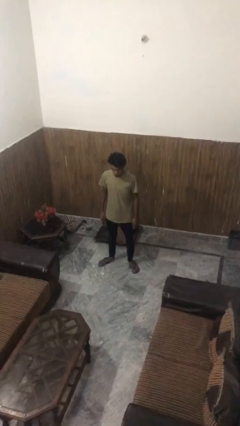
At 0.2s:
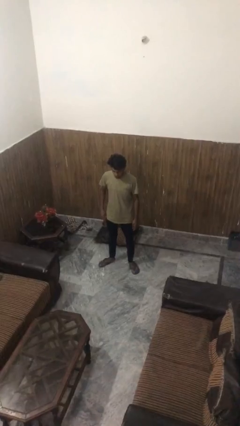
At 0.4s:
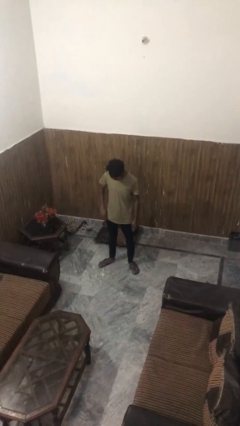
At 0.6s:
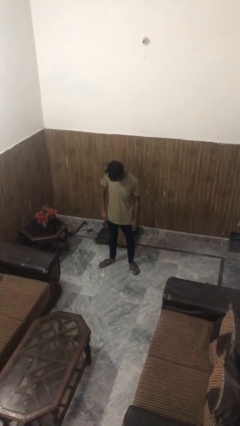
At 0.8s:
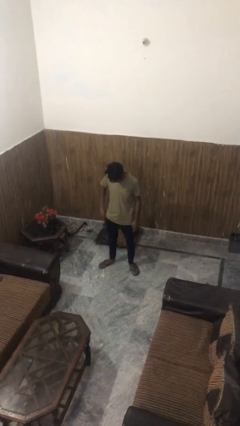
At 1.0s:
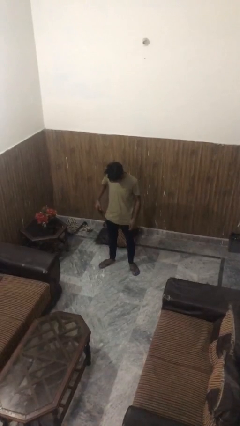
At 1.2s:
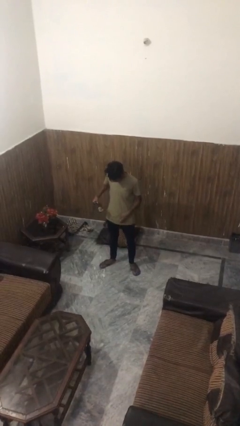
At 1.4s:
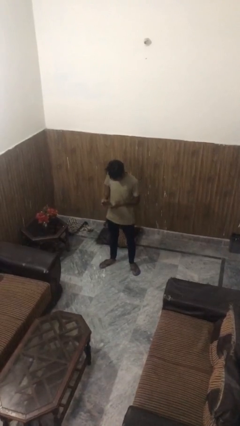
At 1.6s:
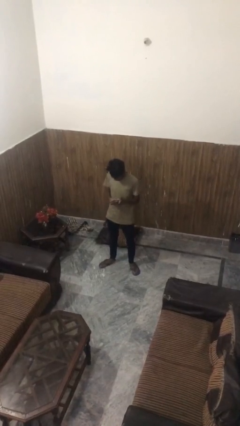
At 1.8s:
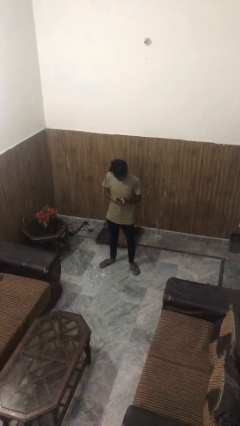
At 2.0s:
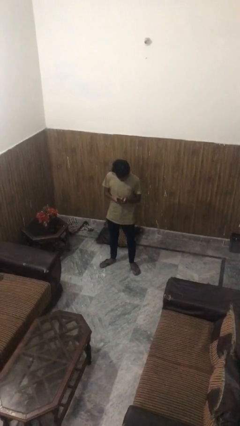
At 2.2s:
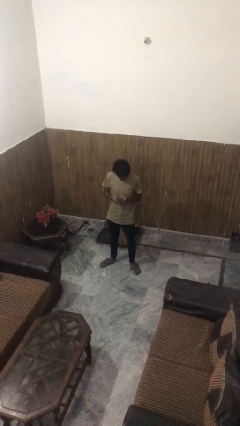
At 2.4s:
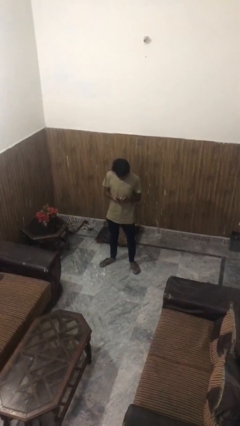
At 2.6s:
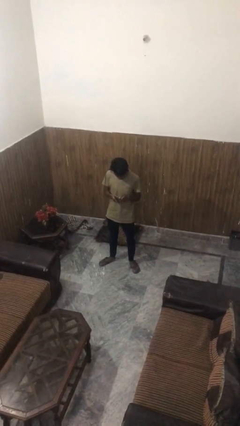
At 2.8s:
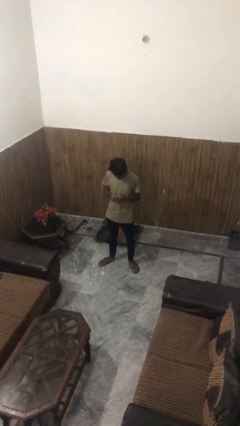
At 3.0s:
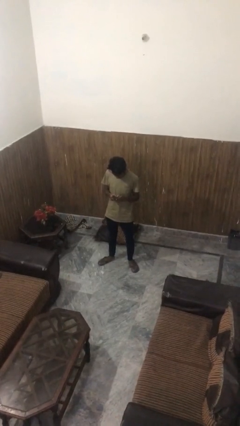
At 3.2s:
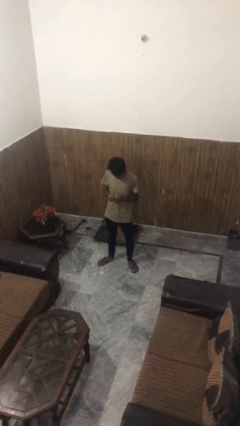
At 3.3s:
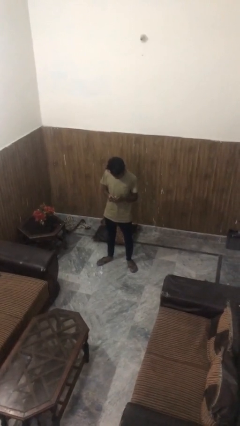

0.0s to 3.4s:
person takes phone from pocket

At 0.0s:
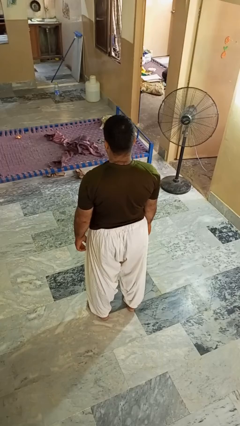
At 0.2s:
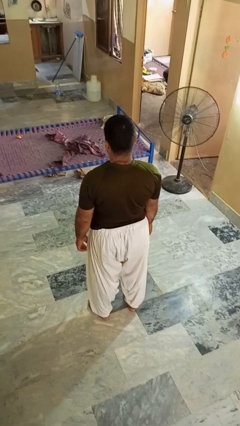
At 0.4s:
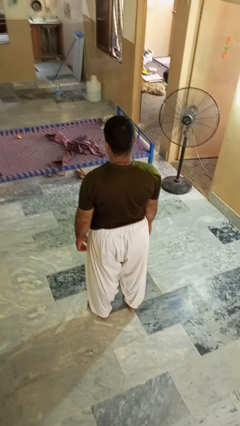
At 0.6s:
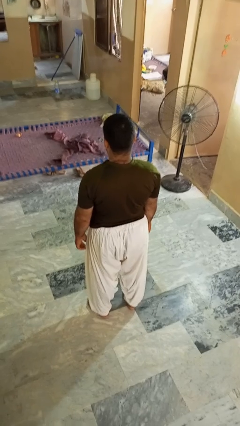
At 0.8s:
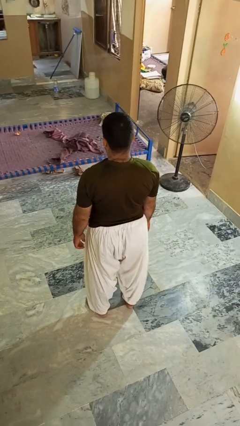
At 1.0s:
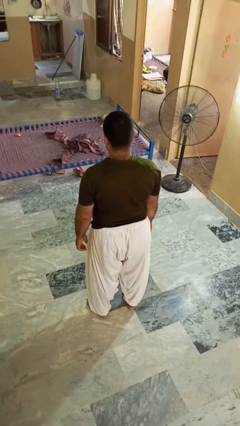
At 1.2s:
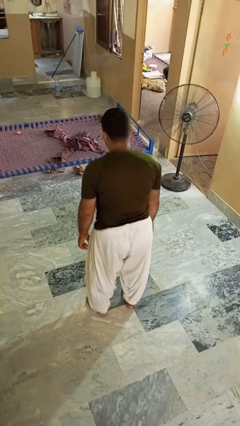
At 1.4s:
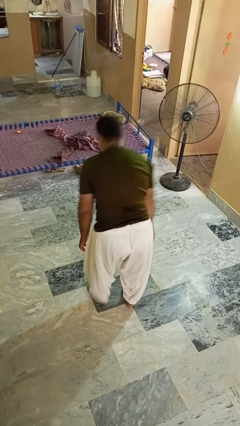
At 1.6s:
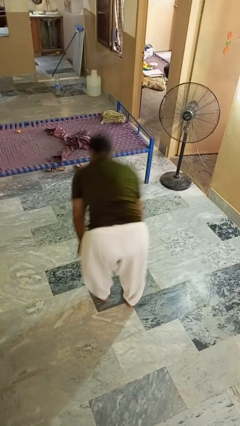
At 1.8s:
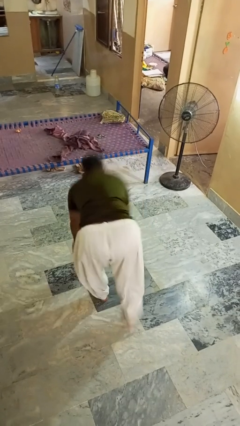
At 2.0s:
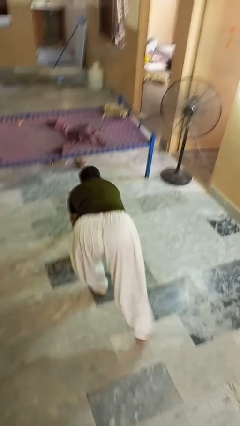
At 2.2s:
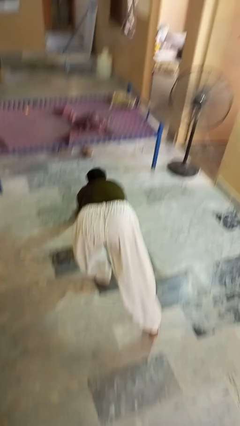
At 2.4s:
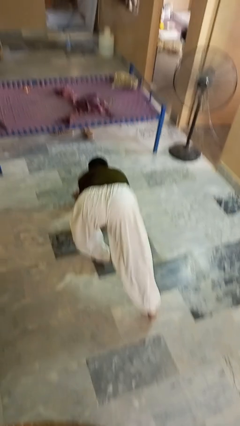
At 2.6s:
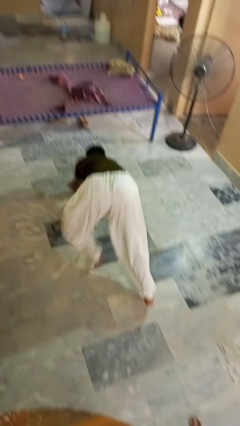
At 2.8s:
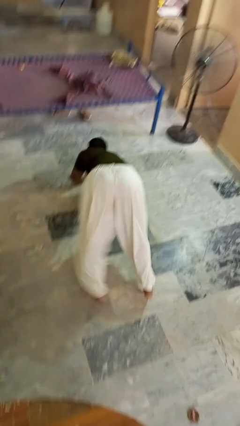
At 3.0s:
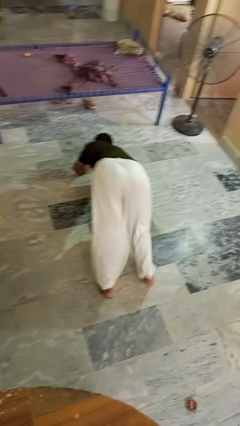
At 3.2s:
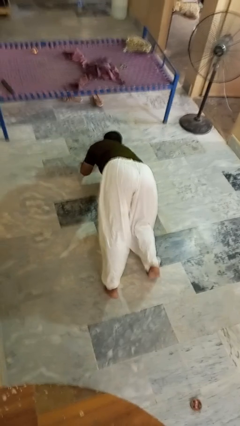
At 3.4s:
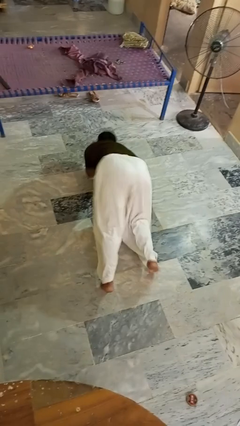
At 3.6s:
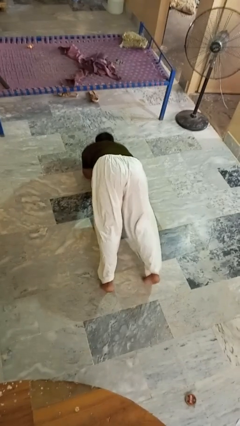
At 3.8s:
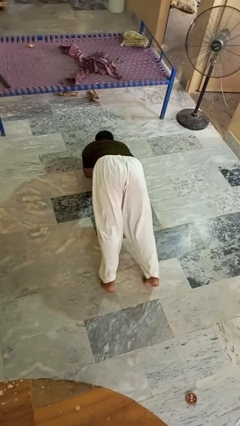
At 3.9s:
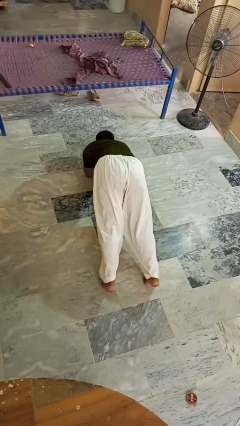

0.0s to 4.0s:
person exercises with plank

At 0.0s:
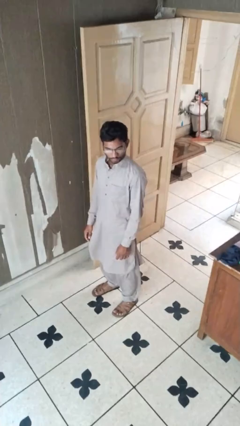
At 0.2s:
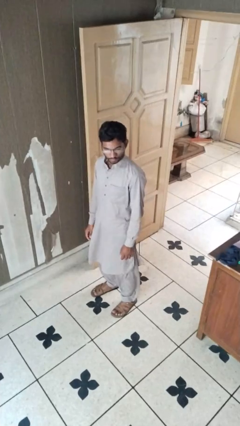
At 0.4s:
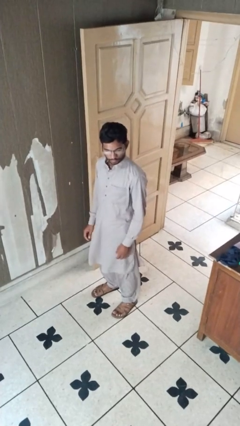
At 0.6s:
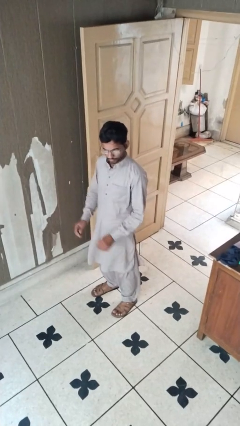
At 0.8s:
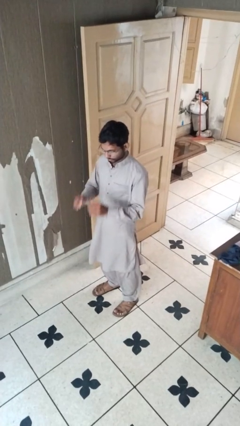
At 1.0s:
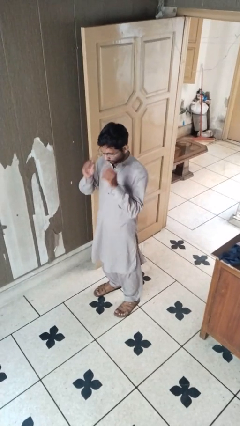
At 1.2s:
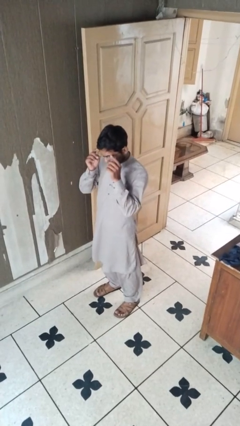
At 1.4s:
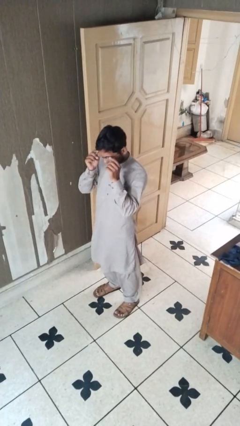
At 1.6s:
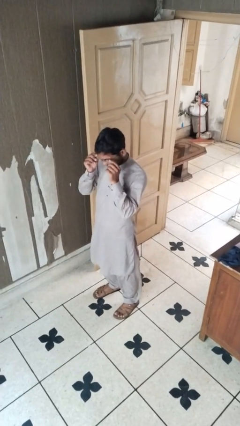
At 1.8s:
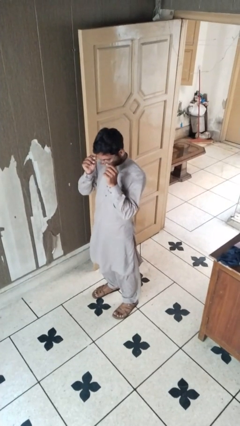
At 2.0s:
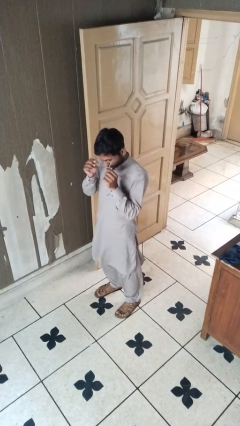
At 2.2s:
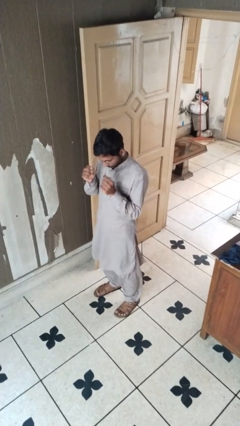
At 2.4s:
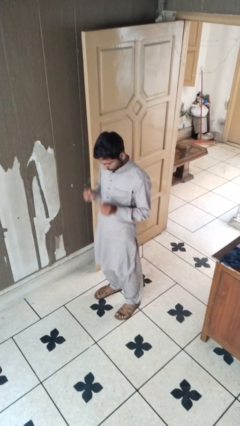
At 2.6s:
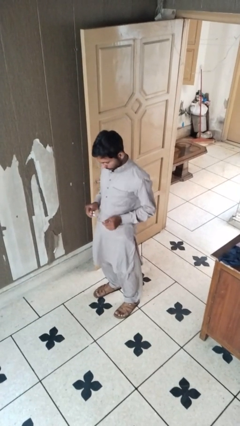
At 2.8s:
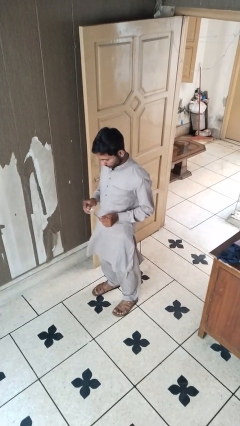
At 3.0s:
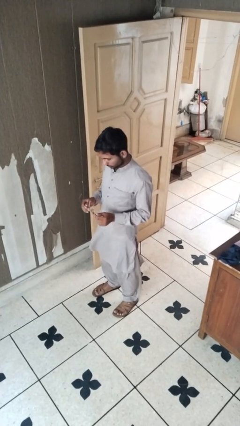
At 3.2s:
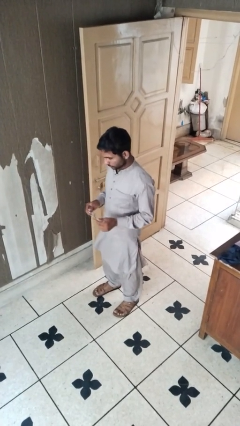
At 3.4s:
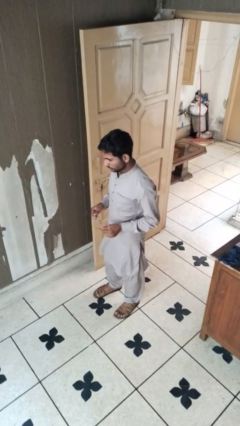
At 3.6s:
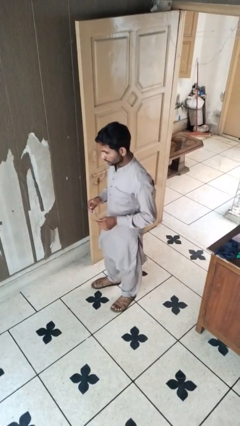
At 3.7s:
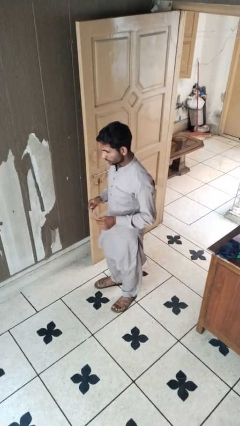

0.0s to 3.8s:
person takes off glasses

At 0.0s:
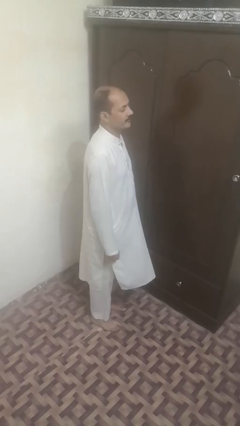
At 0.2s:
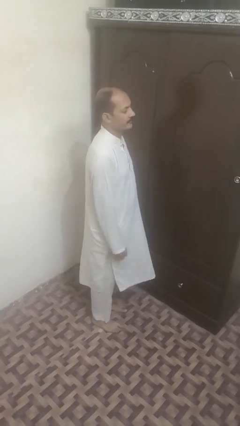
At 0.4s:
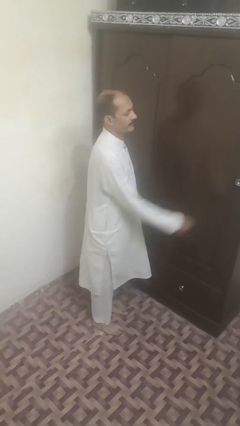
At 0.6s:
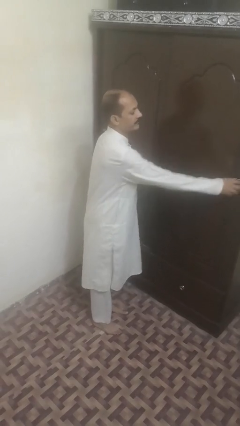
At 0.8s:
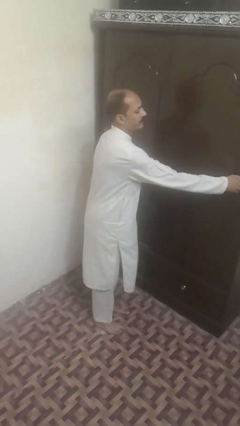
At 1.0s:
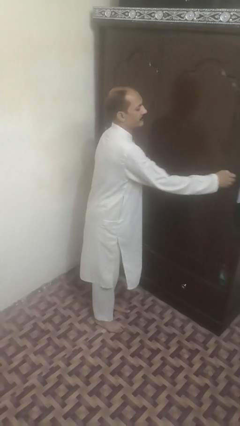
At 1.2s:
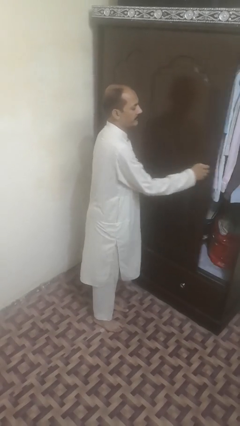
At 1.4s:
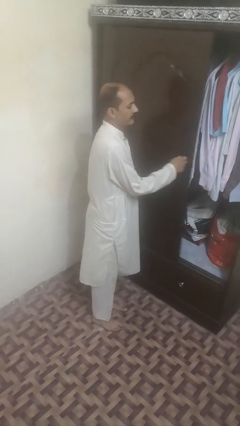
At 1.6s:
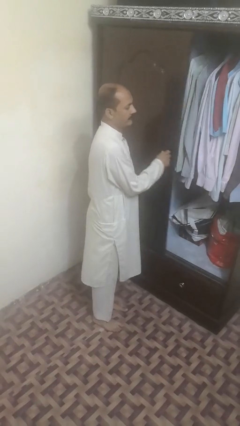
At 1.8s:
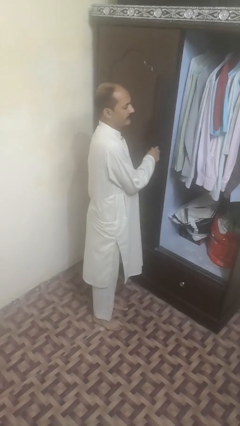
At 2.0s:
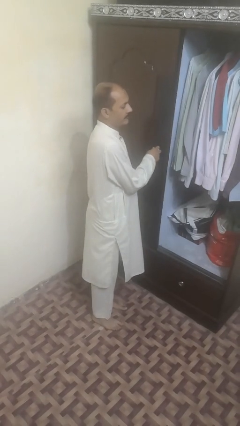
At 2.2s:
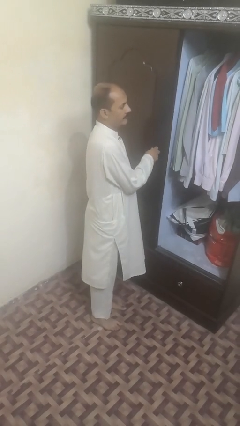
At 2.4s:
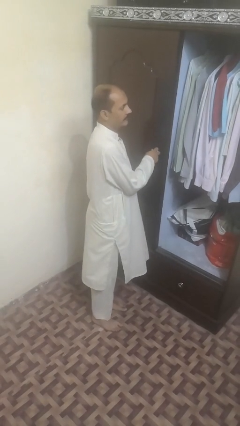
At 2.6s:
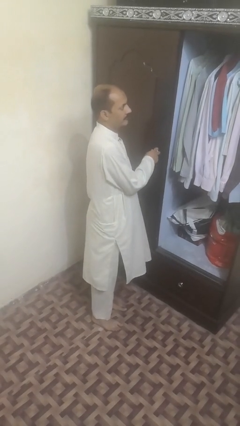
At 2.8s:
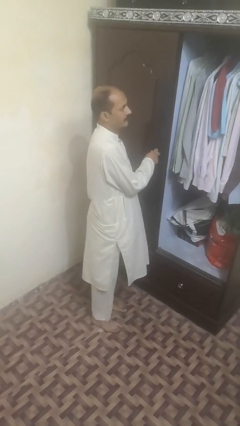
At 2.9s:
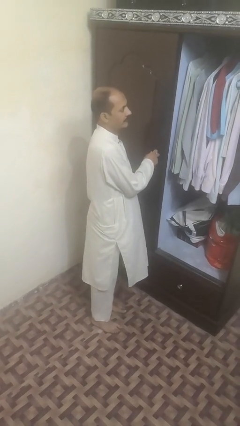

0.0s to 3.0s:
person opens sliding door

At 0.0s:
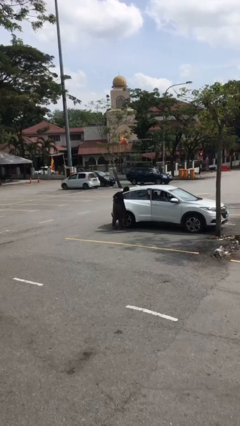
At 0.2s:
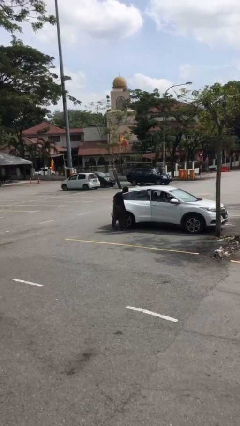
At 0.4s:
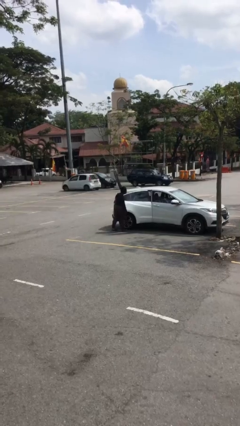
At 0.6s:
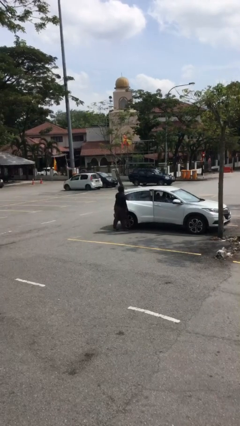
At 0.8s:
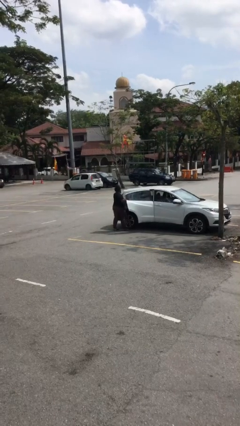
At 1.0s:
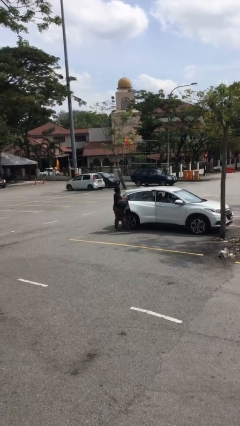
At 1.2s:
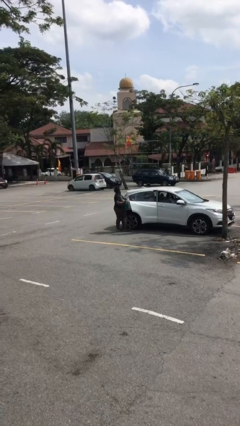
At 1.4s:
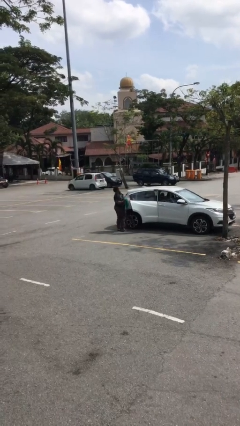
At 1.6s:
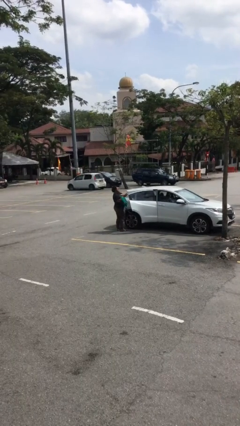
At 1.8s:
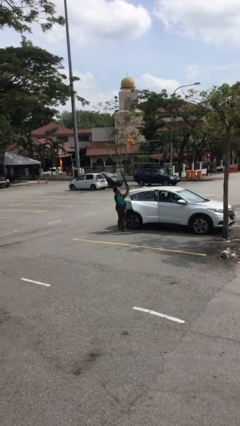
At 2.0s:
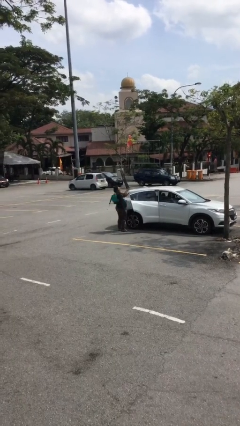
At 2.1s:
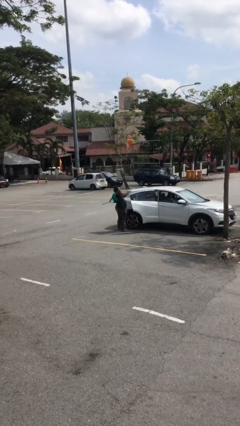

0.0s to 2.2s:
person unloads car

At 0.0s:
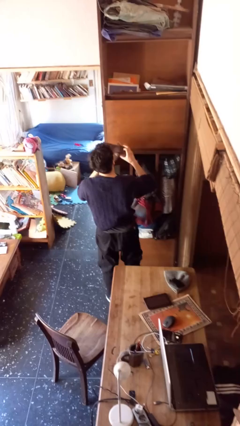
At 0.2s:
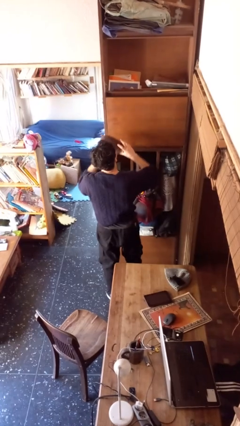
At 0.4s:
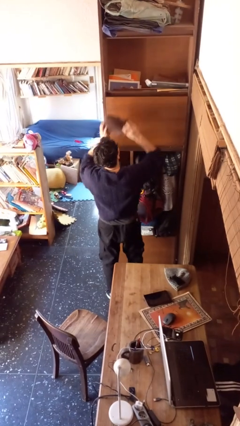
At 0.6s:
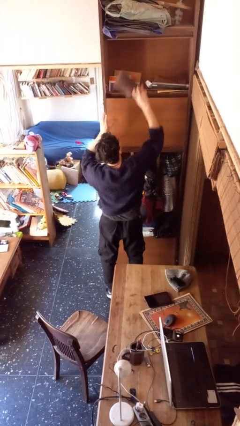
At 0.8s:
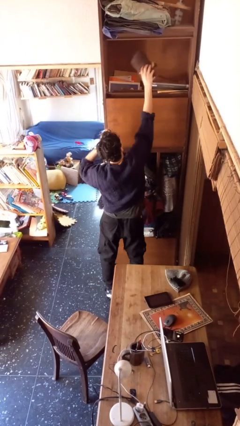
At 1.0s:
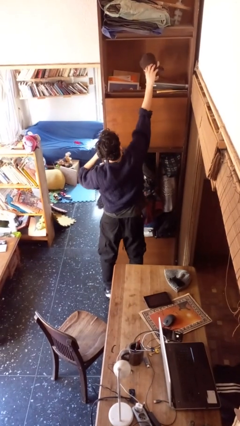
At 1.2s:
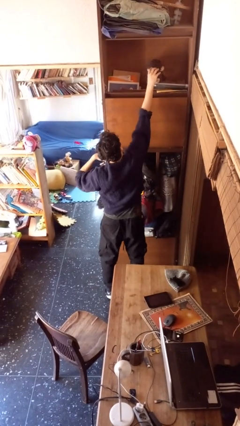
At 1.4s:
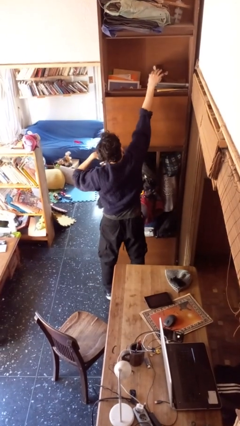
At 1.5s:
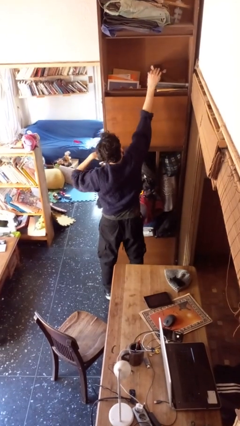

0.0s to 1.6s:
person puts down object on shelf
